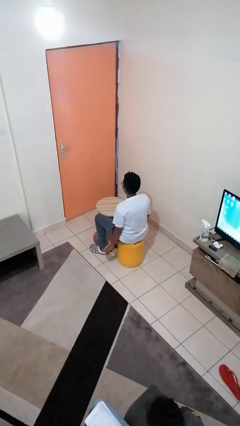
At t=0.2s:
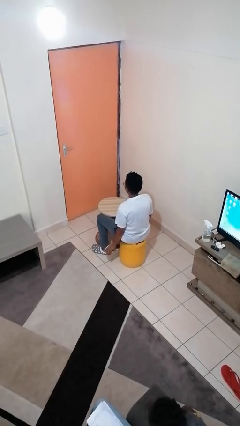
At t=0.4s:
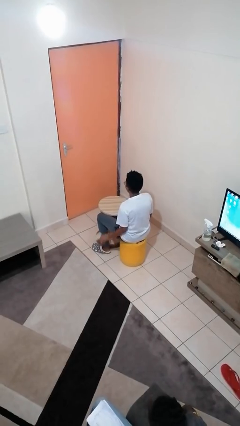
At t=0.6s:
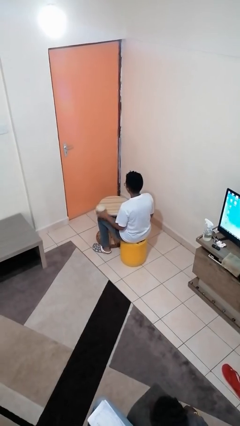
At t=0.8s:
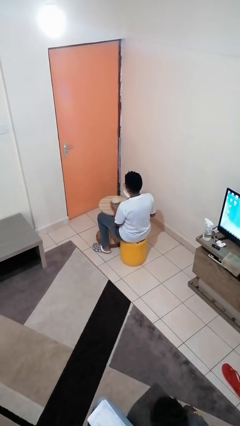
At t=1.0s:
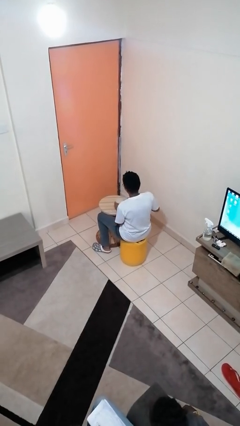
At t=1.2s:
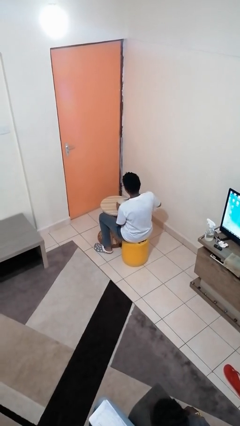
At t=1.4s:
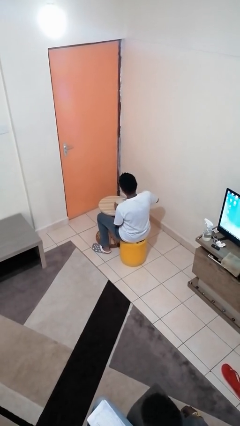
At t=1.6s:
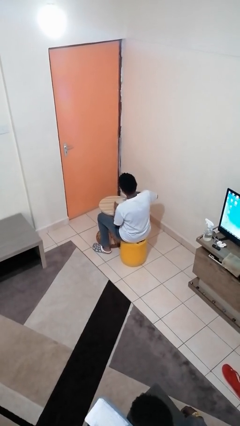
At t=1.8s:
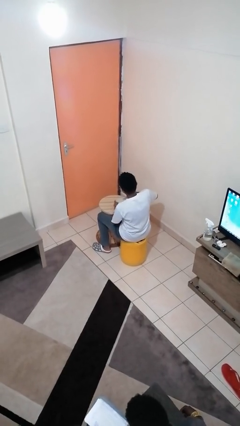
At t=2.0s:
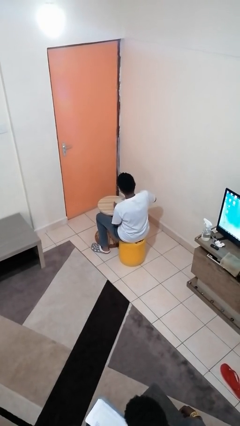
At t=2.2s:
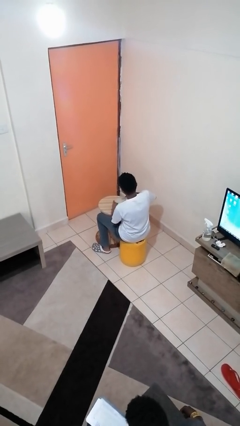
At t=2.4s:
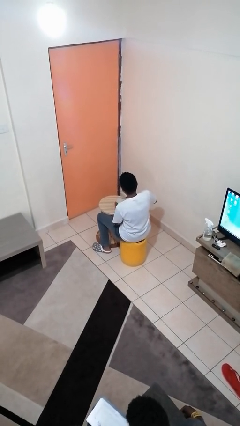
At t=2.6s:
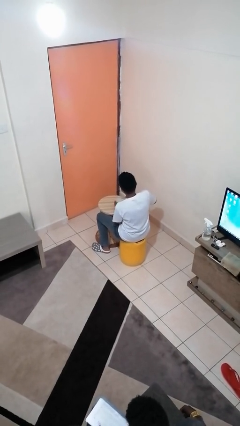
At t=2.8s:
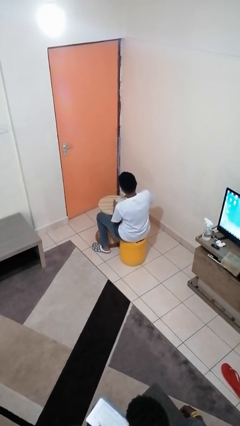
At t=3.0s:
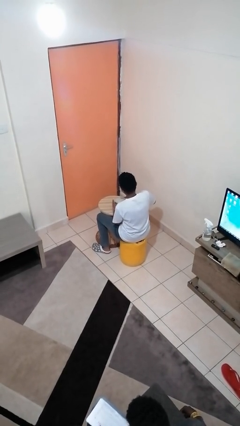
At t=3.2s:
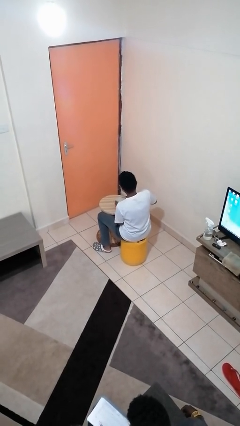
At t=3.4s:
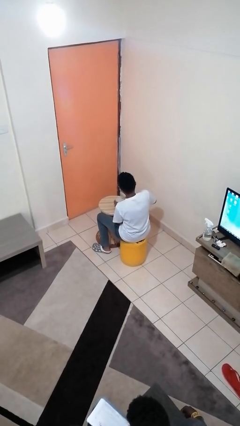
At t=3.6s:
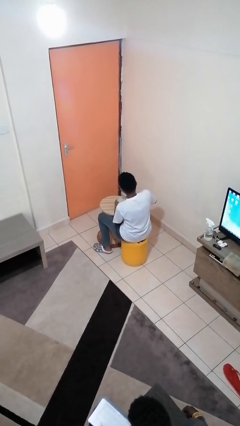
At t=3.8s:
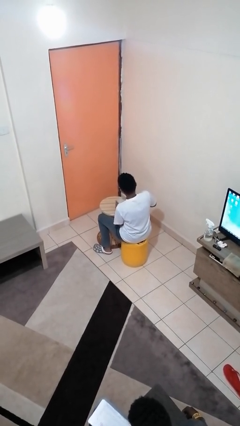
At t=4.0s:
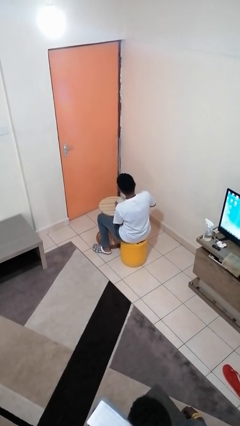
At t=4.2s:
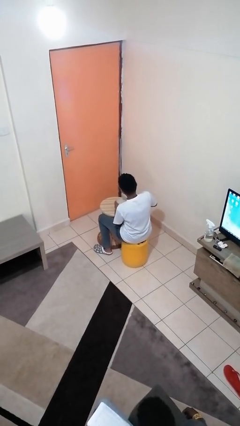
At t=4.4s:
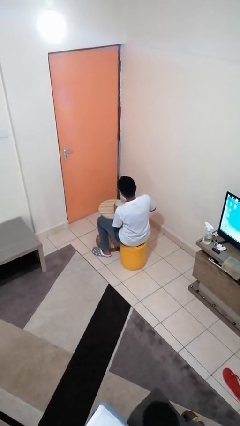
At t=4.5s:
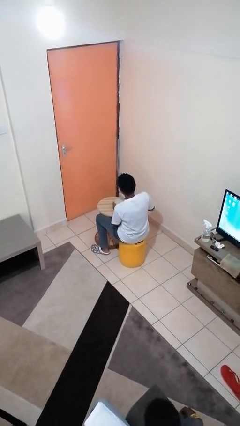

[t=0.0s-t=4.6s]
person opens can with can opener

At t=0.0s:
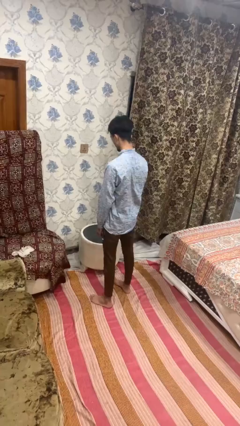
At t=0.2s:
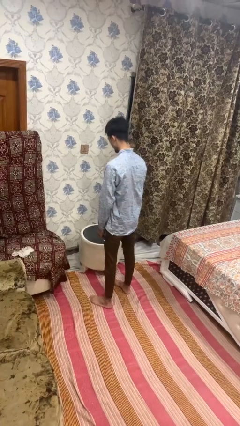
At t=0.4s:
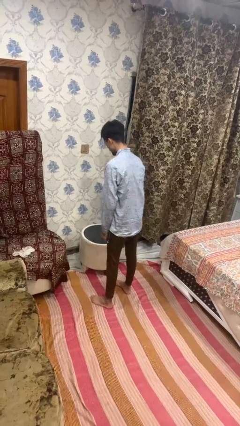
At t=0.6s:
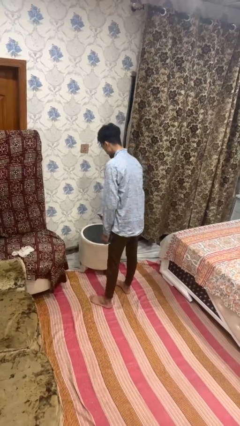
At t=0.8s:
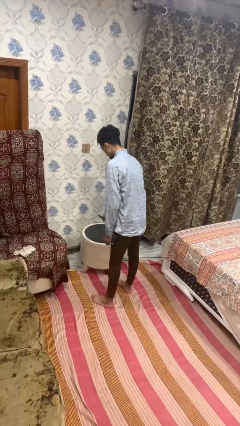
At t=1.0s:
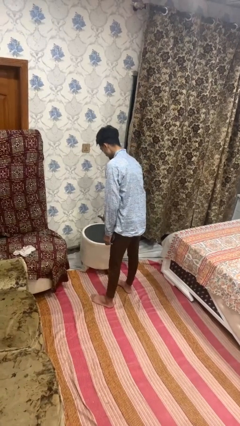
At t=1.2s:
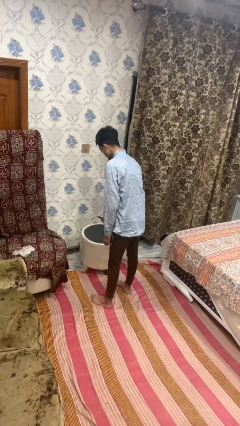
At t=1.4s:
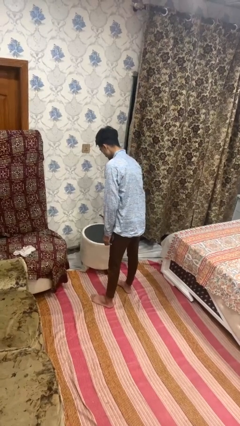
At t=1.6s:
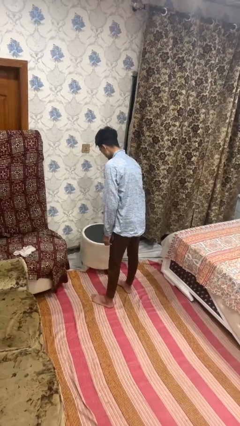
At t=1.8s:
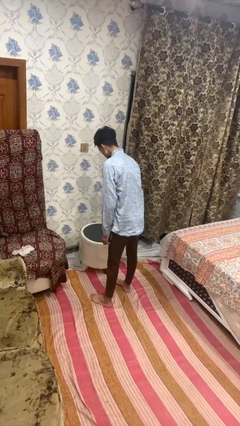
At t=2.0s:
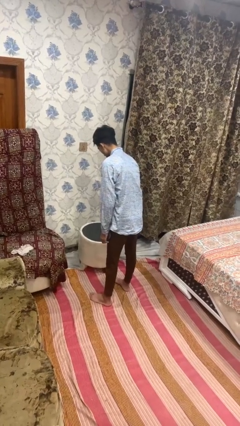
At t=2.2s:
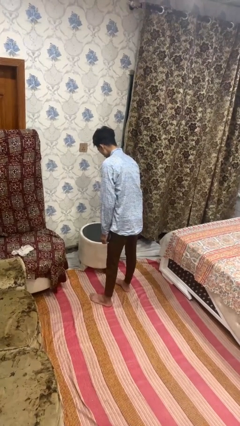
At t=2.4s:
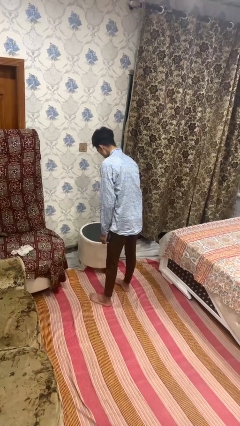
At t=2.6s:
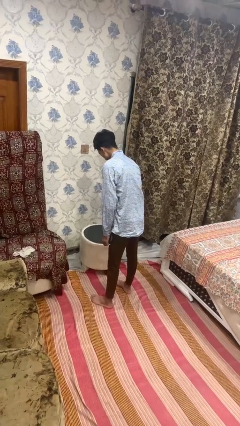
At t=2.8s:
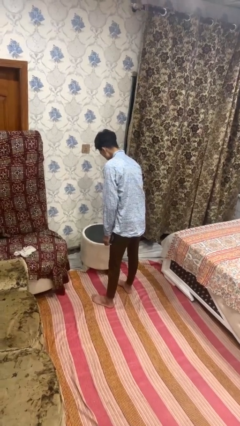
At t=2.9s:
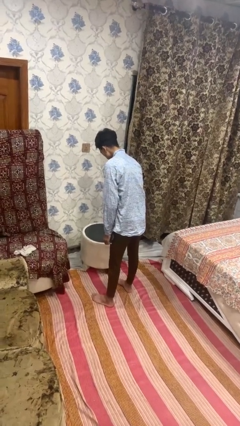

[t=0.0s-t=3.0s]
person sprays from bottle

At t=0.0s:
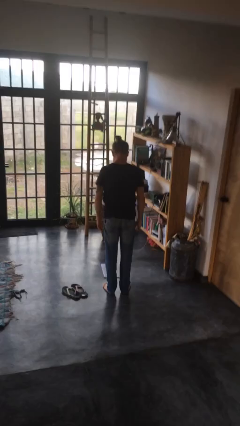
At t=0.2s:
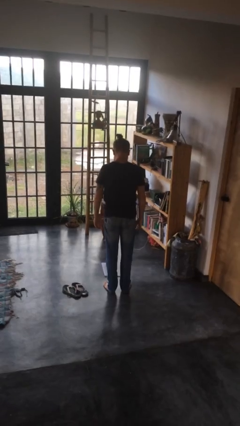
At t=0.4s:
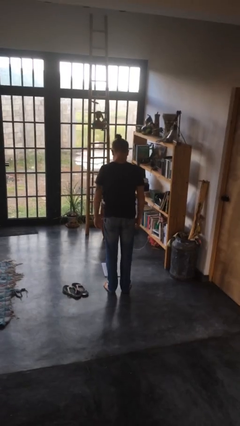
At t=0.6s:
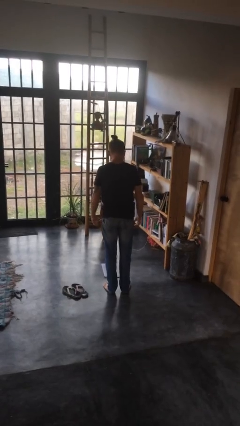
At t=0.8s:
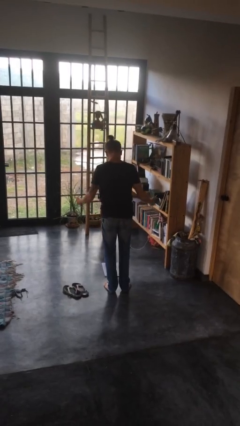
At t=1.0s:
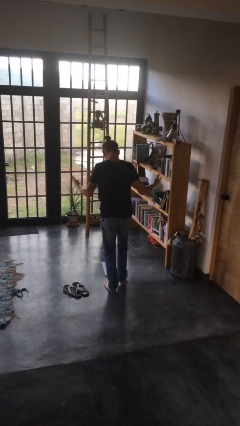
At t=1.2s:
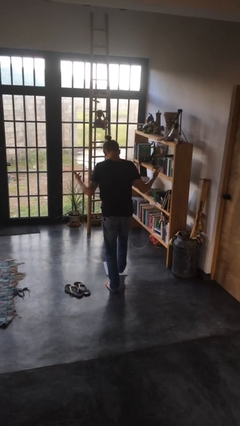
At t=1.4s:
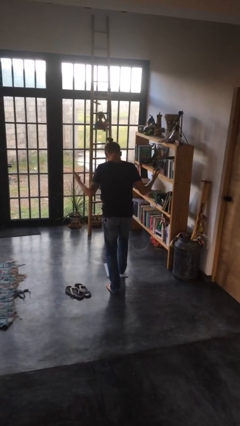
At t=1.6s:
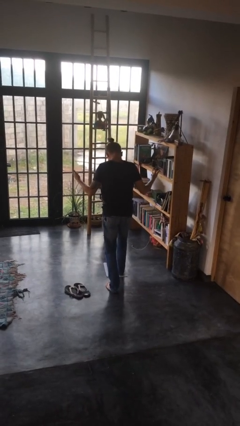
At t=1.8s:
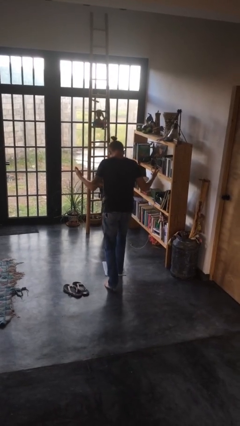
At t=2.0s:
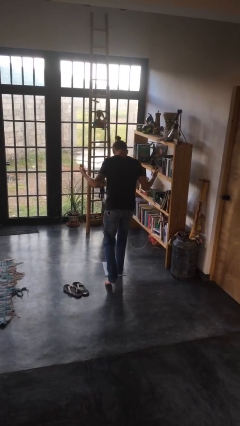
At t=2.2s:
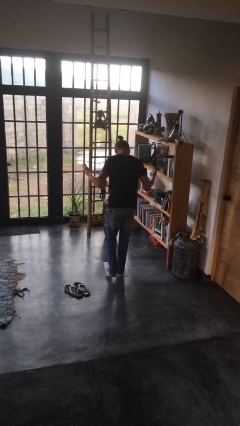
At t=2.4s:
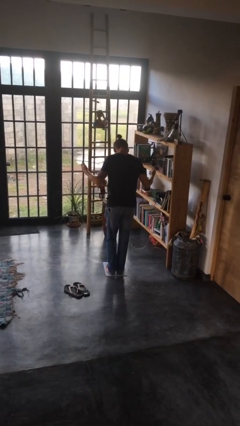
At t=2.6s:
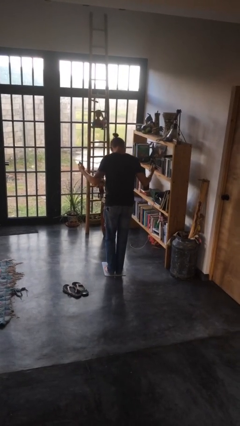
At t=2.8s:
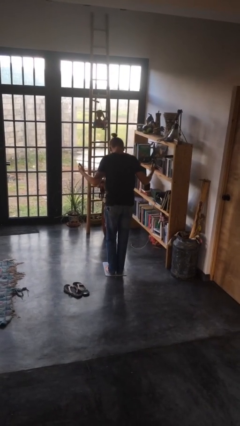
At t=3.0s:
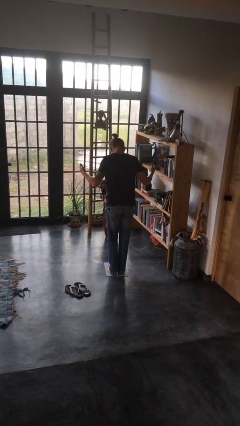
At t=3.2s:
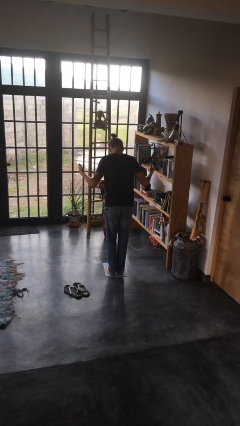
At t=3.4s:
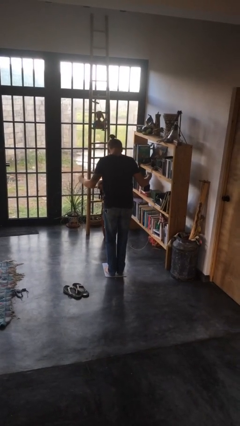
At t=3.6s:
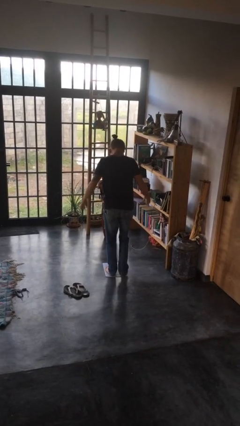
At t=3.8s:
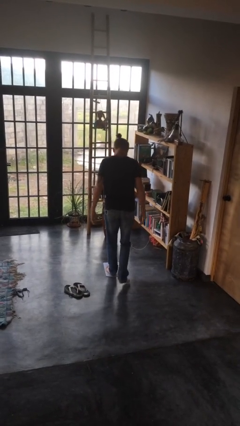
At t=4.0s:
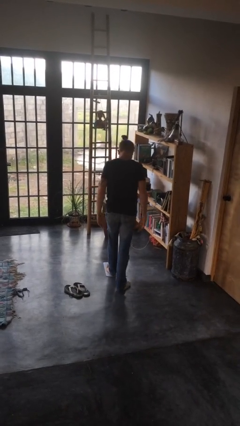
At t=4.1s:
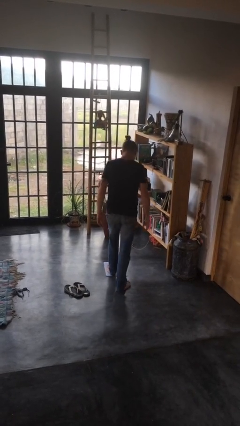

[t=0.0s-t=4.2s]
person uses bodyweight scale

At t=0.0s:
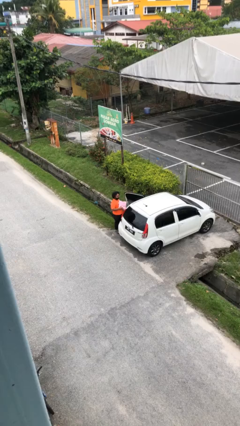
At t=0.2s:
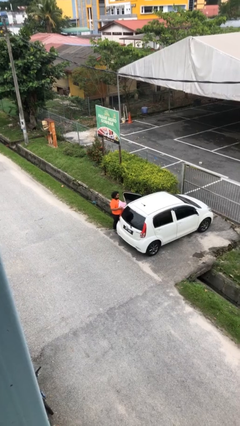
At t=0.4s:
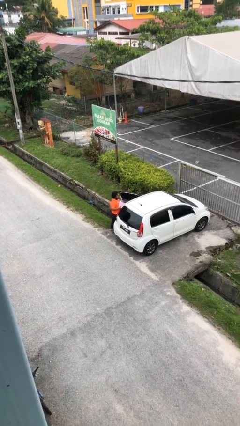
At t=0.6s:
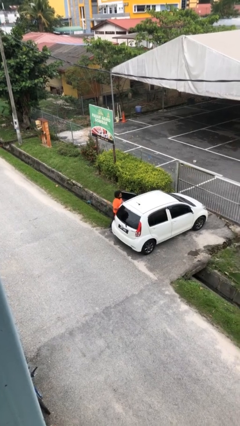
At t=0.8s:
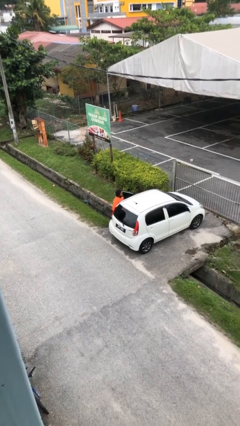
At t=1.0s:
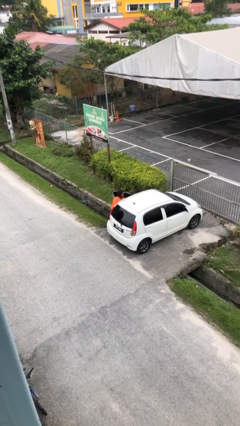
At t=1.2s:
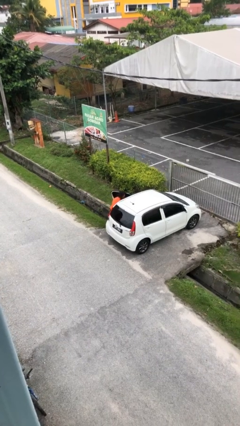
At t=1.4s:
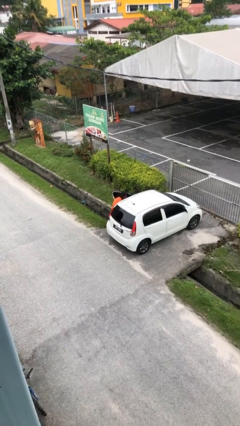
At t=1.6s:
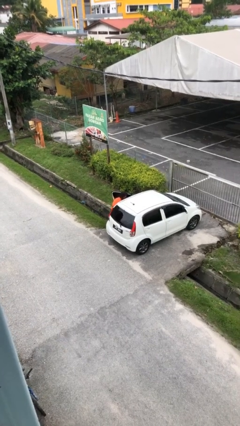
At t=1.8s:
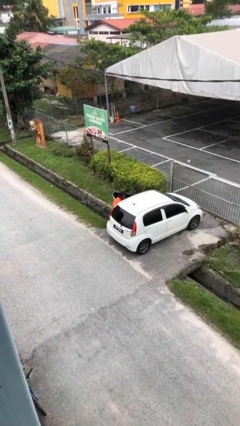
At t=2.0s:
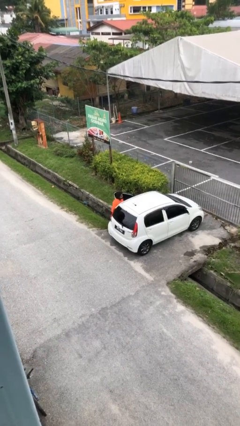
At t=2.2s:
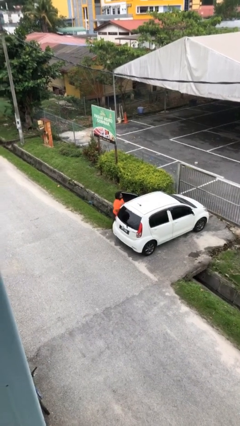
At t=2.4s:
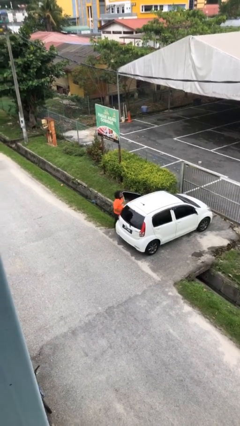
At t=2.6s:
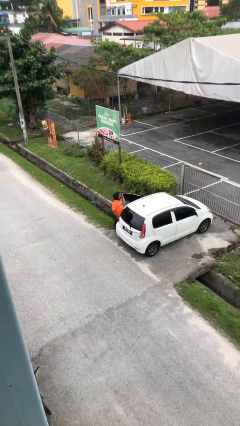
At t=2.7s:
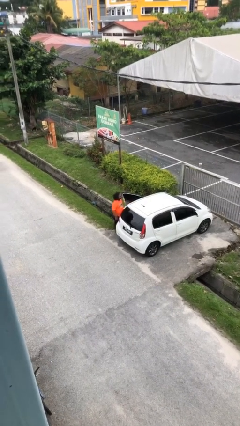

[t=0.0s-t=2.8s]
person loads car

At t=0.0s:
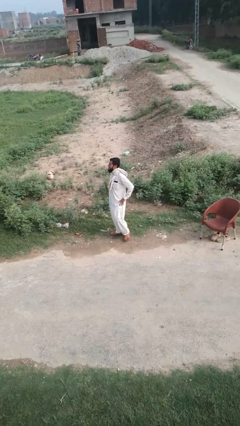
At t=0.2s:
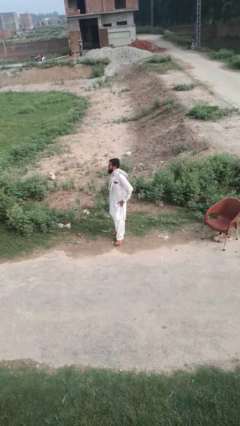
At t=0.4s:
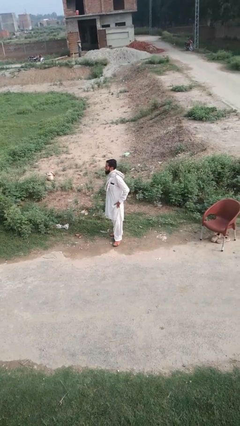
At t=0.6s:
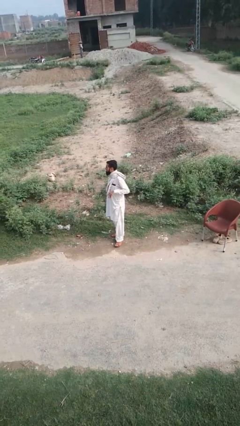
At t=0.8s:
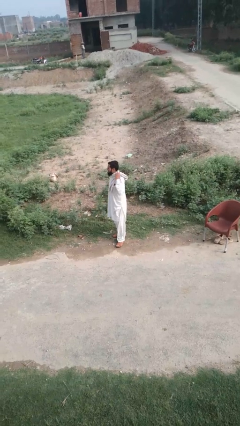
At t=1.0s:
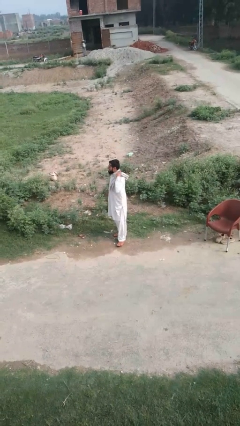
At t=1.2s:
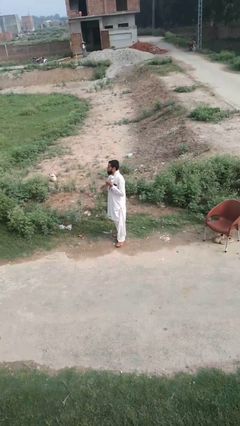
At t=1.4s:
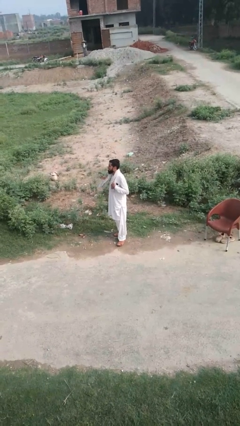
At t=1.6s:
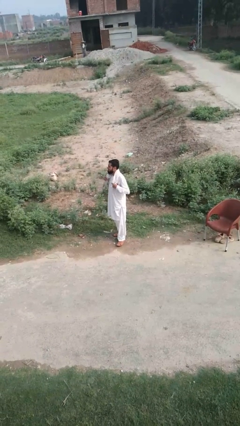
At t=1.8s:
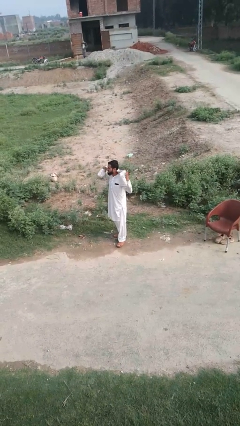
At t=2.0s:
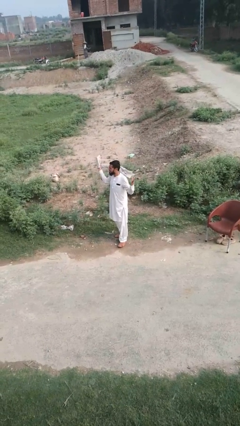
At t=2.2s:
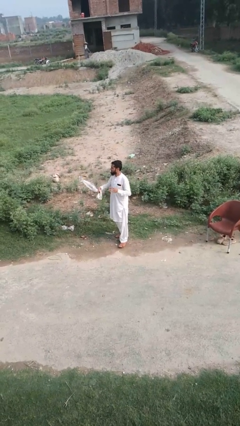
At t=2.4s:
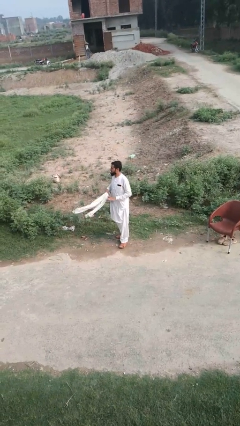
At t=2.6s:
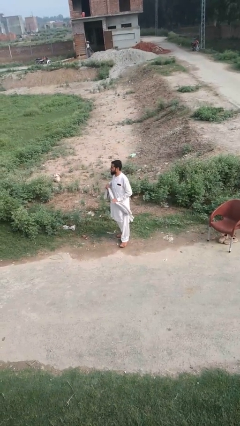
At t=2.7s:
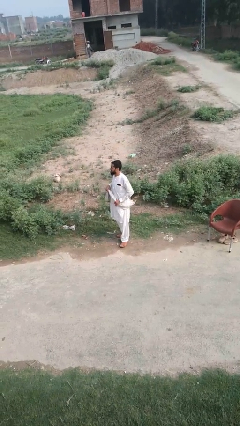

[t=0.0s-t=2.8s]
person takes off scarf
